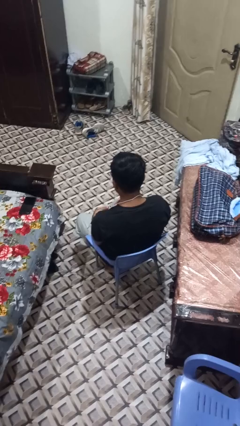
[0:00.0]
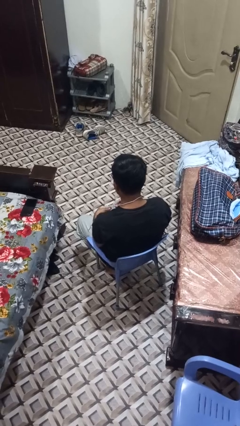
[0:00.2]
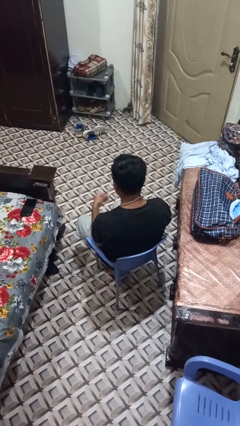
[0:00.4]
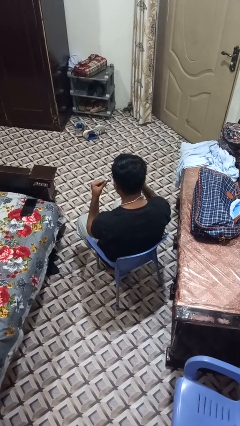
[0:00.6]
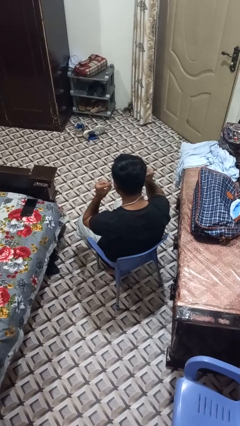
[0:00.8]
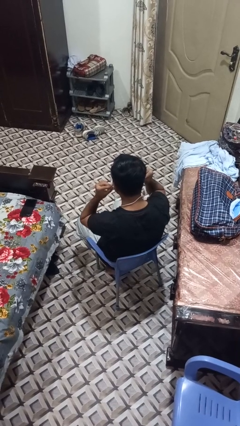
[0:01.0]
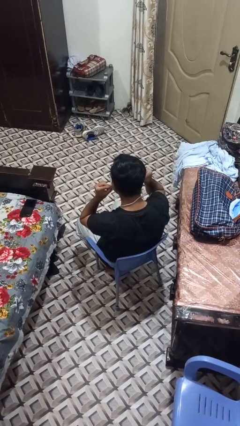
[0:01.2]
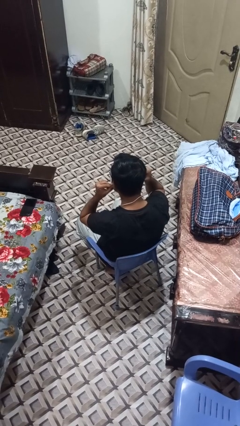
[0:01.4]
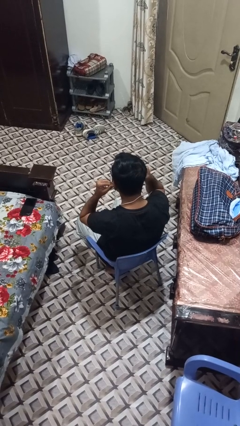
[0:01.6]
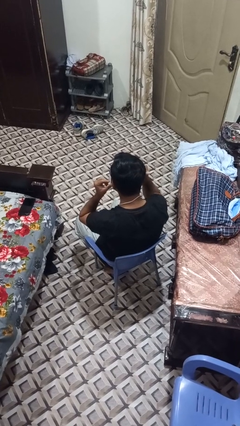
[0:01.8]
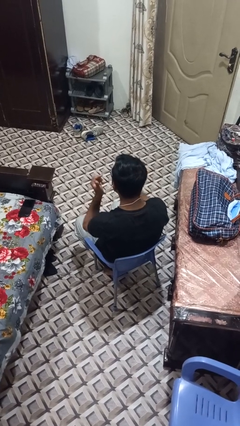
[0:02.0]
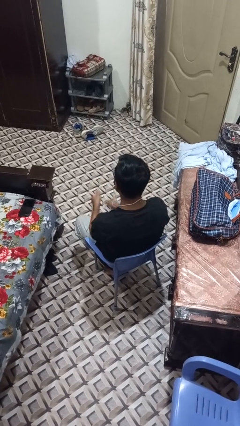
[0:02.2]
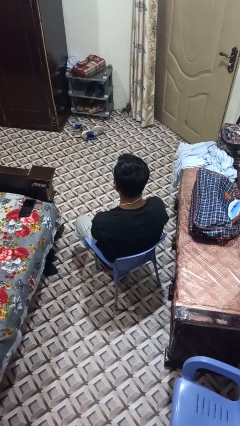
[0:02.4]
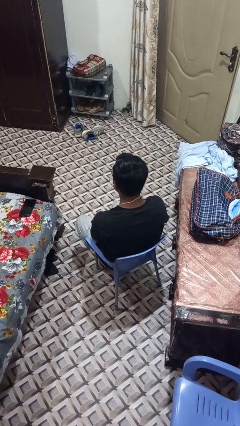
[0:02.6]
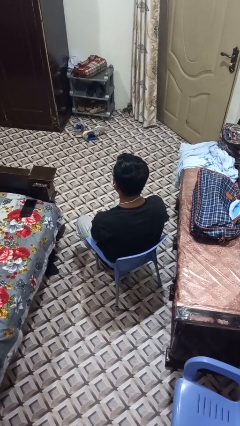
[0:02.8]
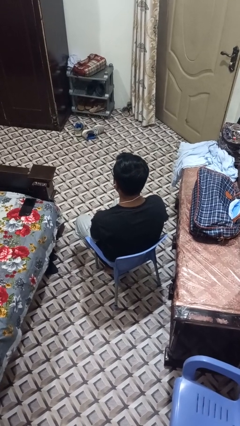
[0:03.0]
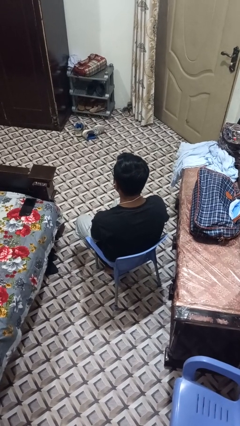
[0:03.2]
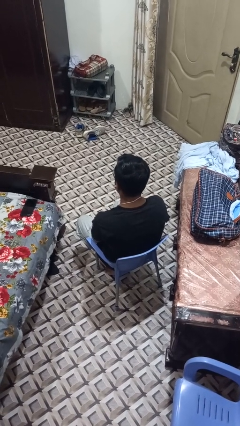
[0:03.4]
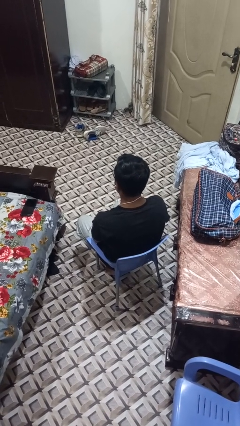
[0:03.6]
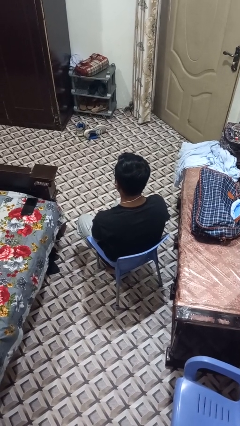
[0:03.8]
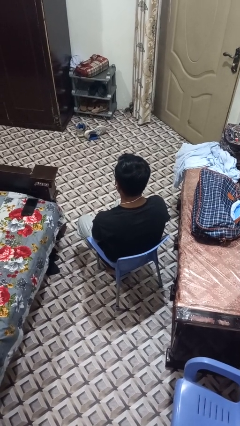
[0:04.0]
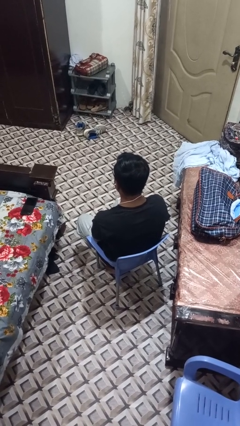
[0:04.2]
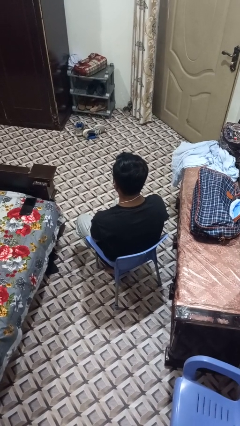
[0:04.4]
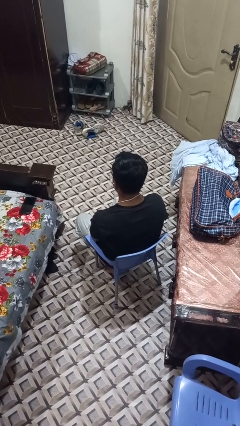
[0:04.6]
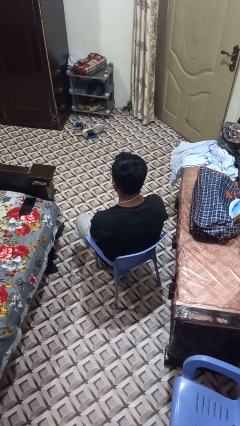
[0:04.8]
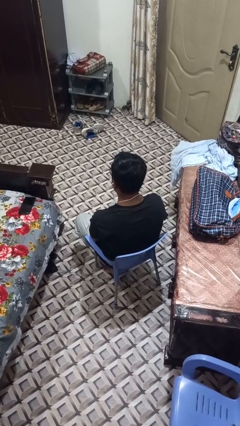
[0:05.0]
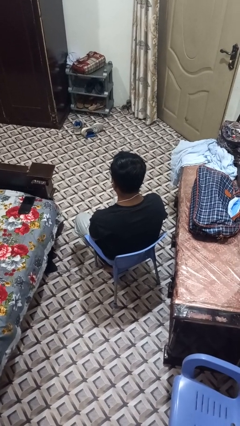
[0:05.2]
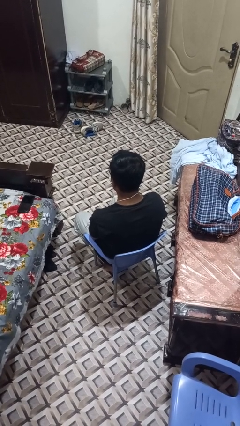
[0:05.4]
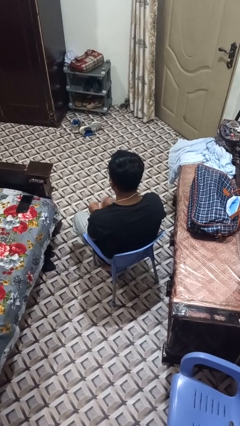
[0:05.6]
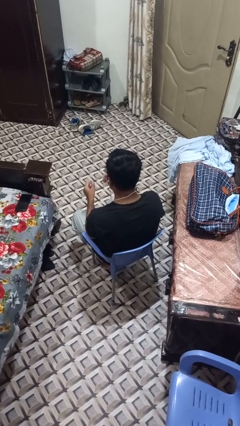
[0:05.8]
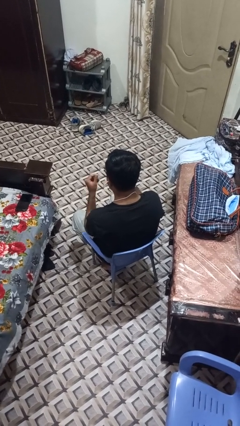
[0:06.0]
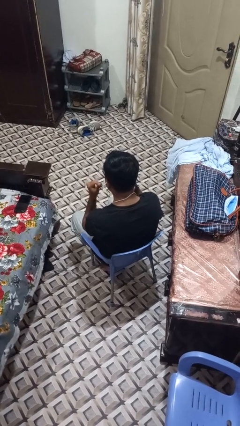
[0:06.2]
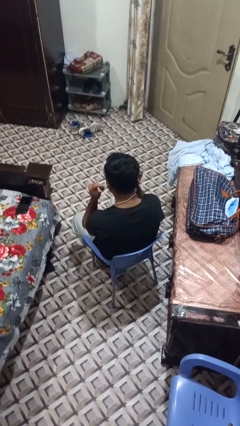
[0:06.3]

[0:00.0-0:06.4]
person puts on headphones

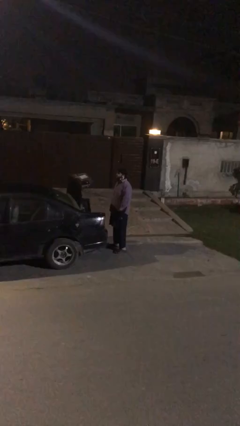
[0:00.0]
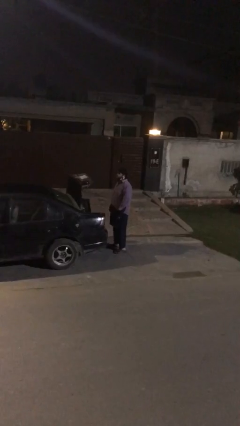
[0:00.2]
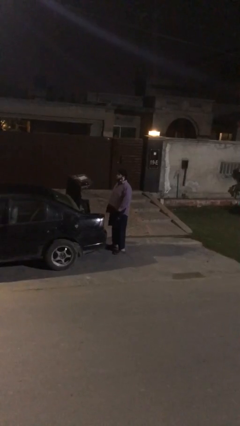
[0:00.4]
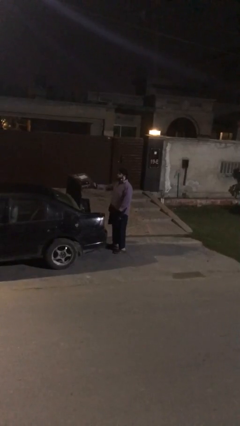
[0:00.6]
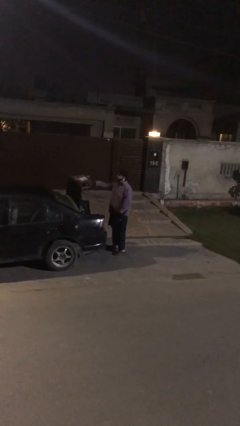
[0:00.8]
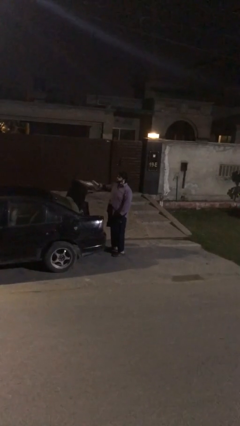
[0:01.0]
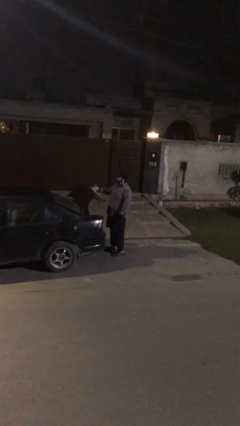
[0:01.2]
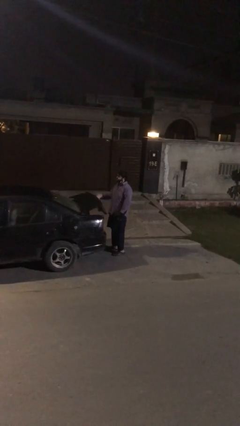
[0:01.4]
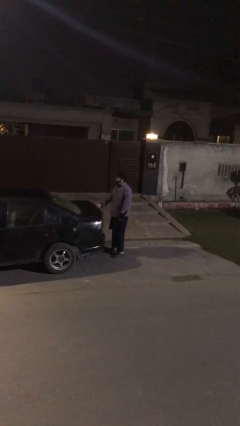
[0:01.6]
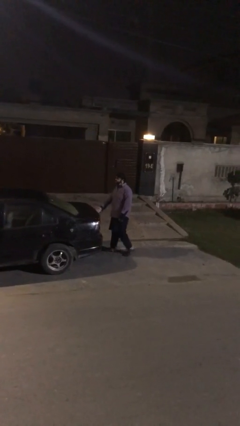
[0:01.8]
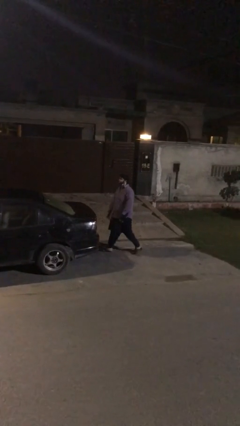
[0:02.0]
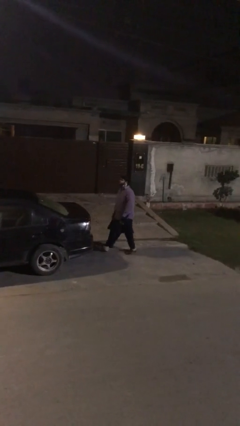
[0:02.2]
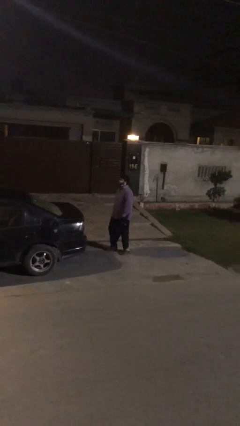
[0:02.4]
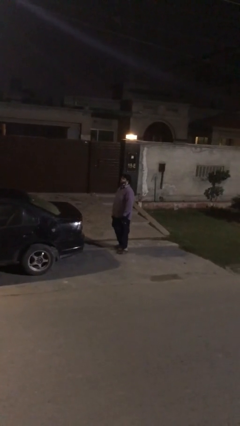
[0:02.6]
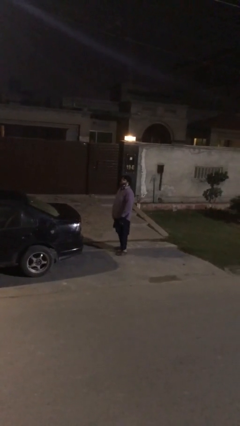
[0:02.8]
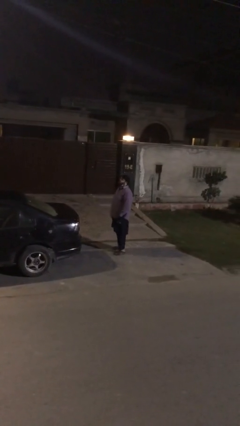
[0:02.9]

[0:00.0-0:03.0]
person closes car trunk

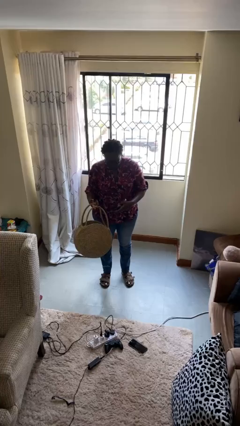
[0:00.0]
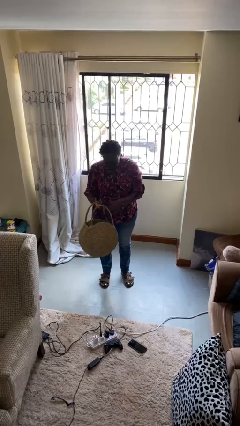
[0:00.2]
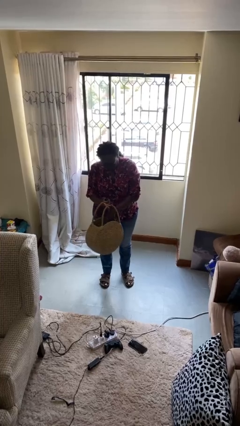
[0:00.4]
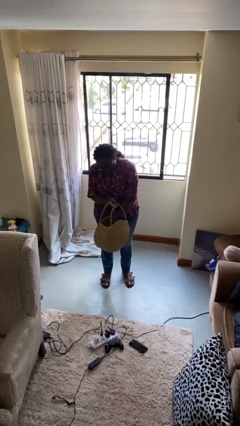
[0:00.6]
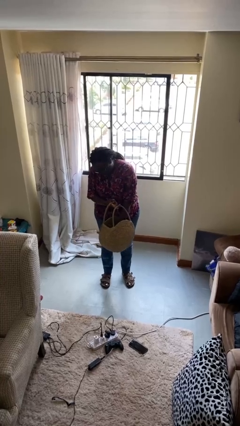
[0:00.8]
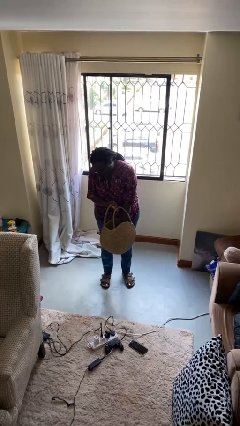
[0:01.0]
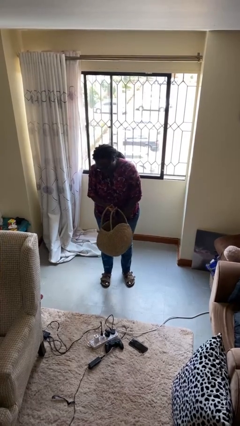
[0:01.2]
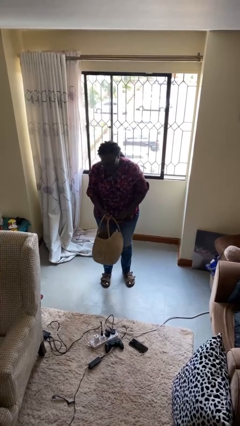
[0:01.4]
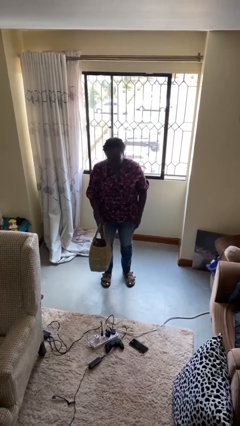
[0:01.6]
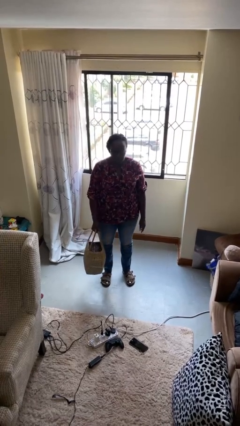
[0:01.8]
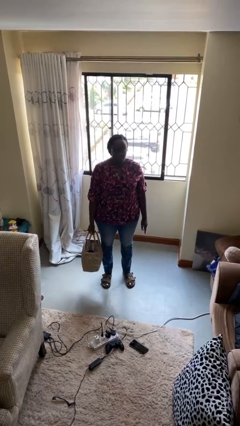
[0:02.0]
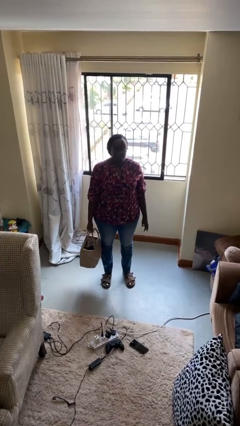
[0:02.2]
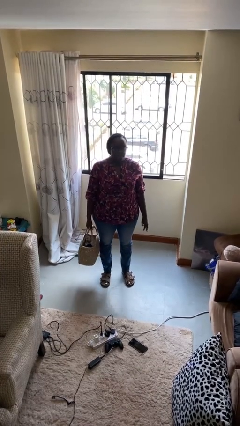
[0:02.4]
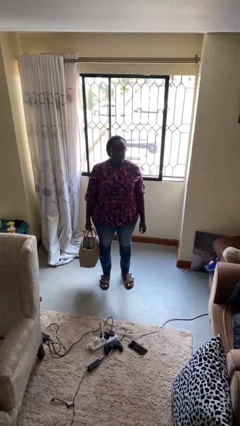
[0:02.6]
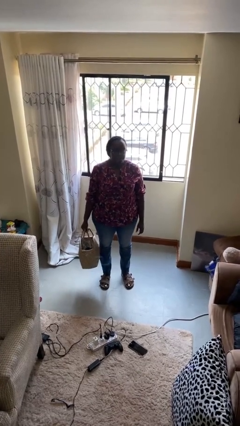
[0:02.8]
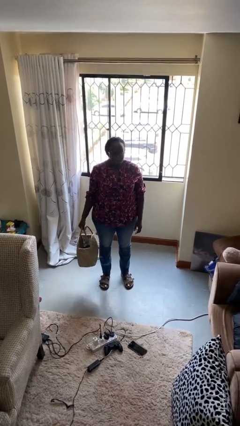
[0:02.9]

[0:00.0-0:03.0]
person puts object into basket

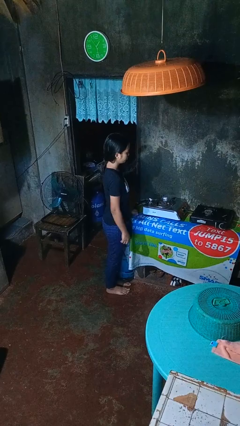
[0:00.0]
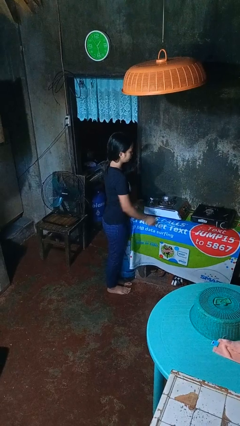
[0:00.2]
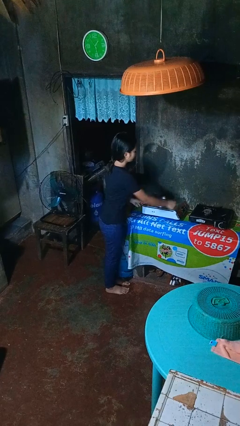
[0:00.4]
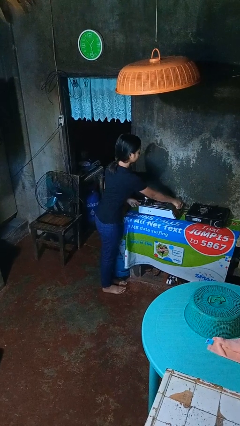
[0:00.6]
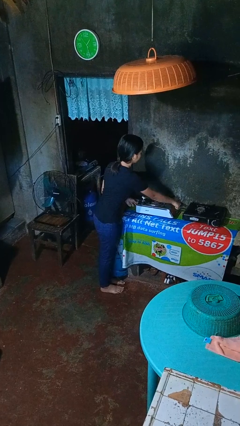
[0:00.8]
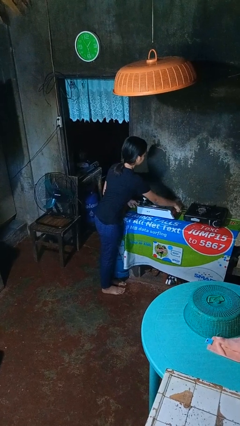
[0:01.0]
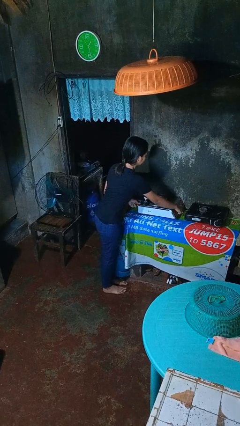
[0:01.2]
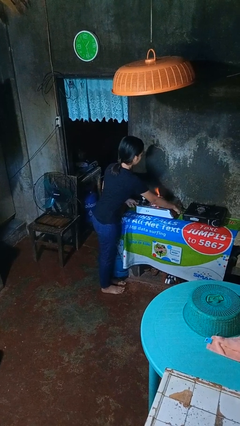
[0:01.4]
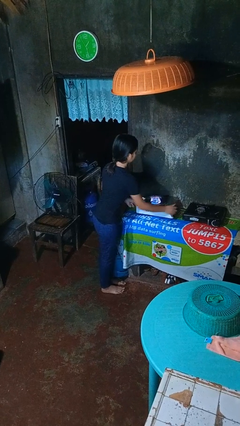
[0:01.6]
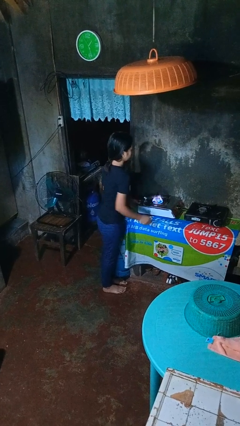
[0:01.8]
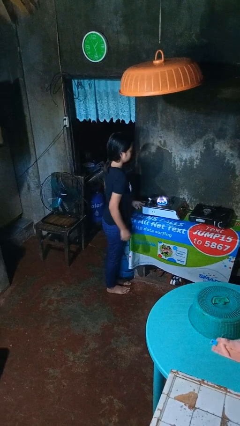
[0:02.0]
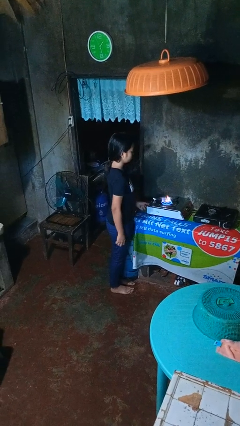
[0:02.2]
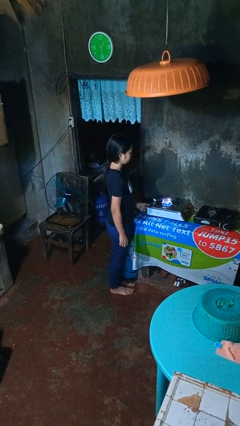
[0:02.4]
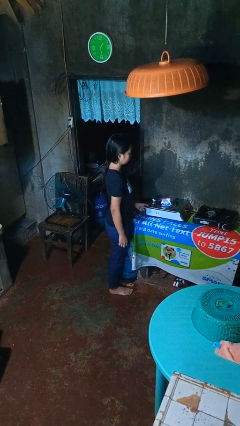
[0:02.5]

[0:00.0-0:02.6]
person turns on stovetop

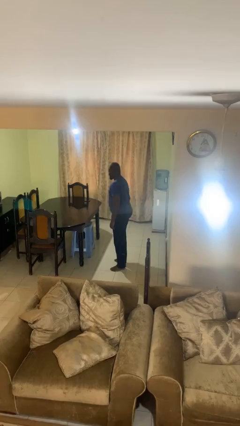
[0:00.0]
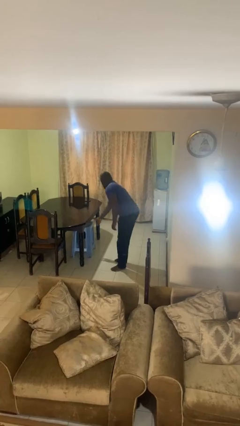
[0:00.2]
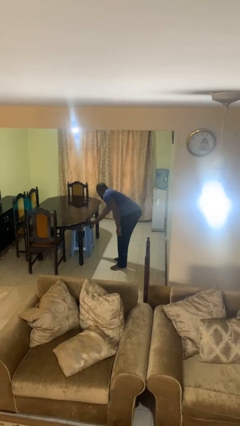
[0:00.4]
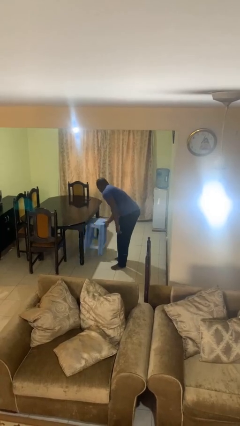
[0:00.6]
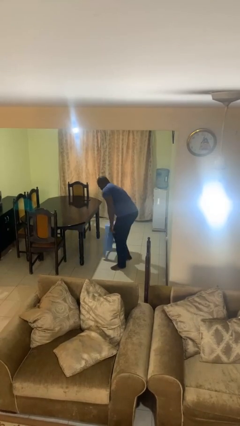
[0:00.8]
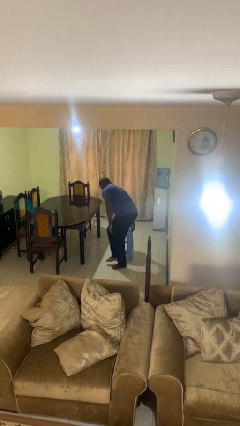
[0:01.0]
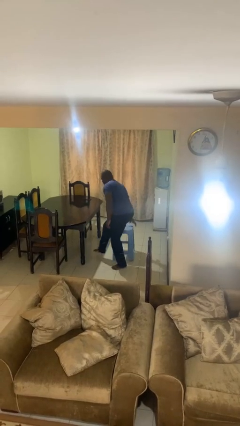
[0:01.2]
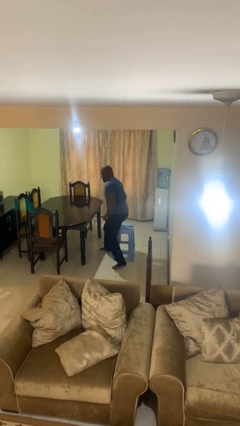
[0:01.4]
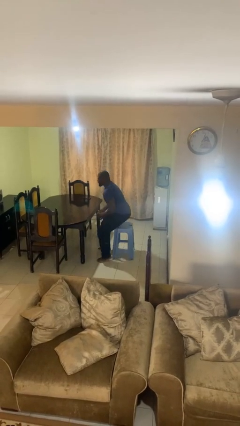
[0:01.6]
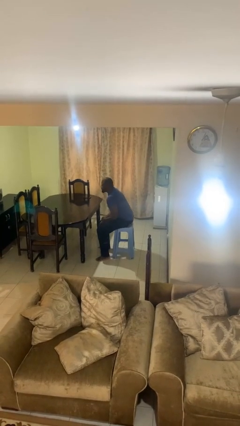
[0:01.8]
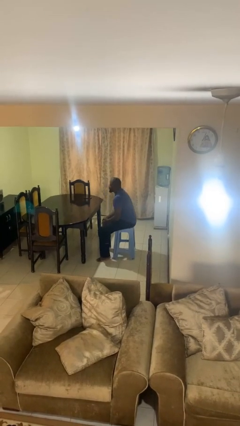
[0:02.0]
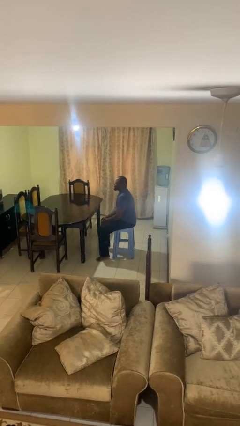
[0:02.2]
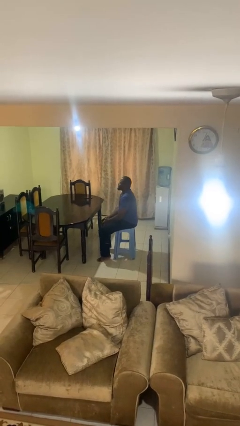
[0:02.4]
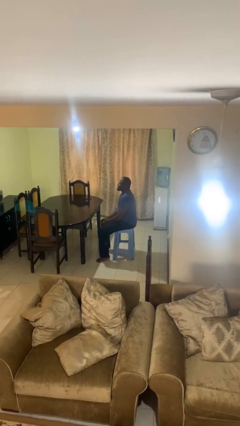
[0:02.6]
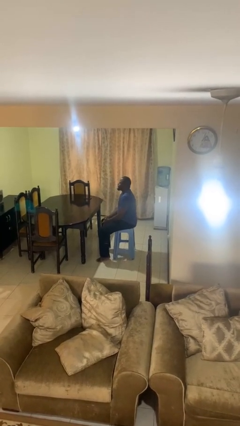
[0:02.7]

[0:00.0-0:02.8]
person sits down
